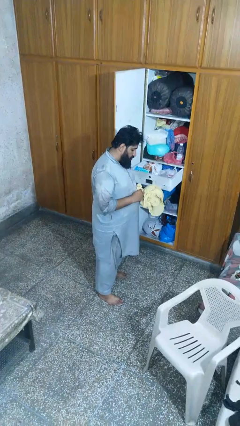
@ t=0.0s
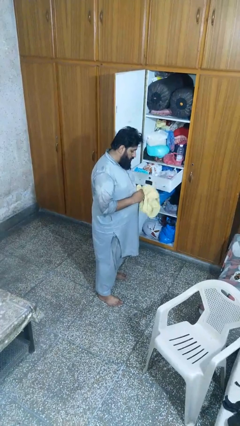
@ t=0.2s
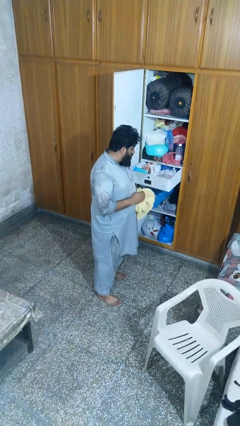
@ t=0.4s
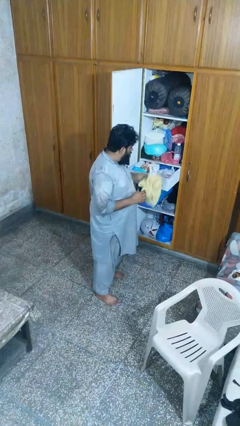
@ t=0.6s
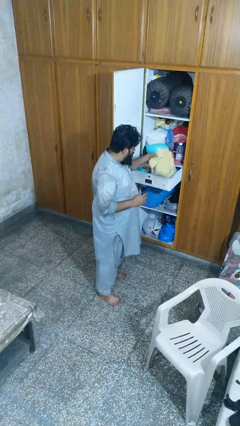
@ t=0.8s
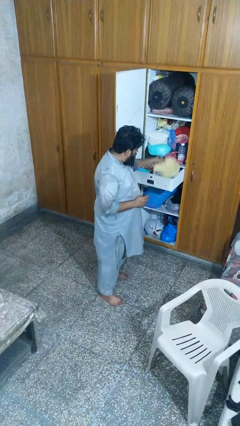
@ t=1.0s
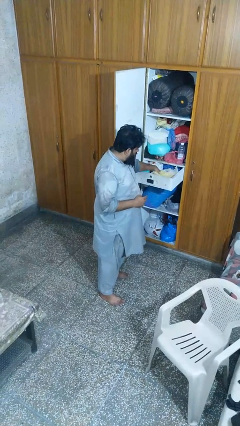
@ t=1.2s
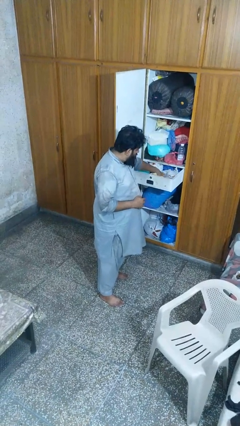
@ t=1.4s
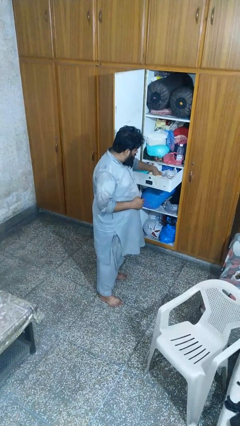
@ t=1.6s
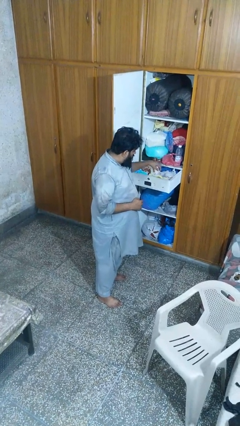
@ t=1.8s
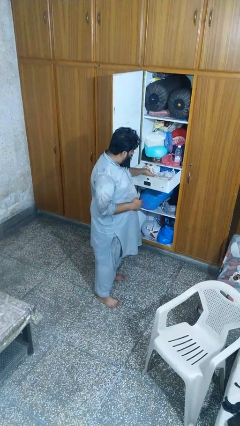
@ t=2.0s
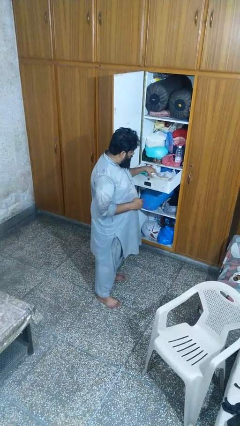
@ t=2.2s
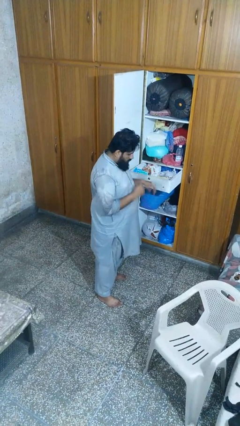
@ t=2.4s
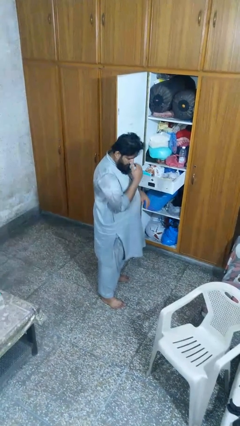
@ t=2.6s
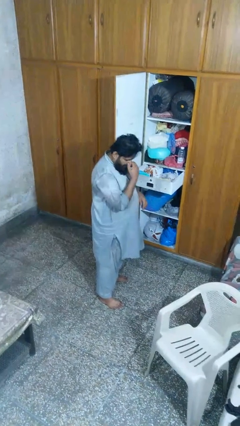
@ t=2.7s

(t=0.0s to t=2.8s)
person puts clothes into dresser

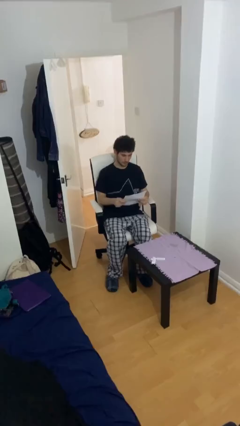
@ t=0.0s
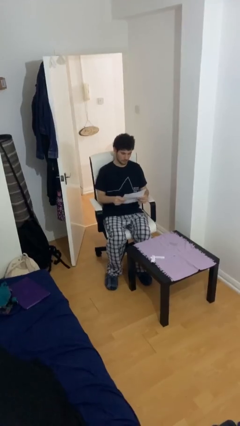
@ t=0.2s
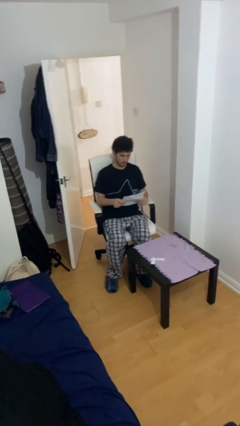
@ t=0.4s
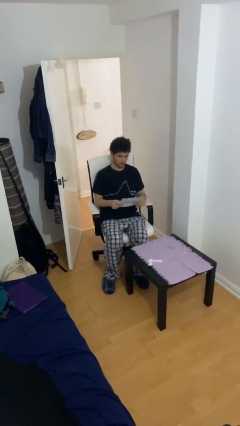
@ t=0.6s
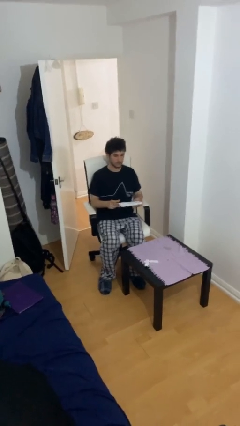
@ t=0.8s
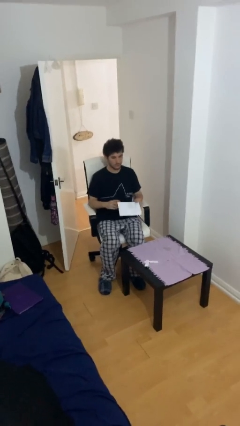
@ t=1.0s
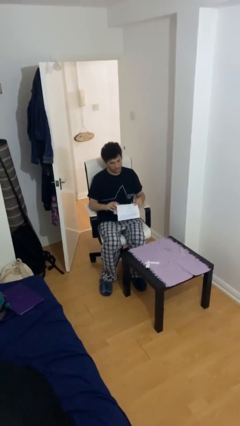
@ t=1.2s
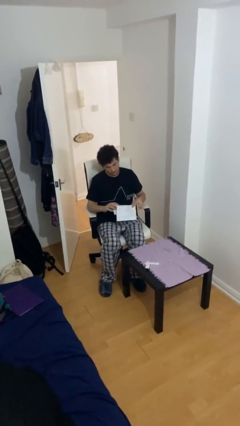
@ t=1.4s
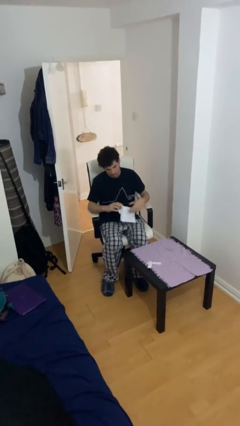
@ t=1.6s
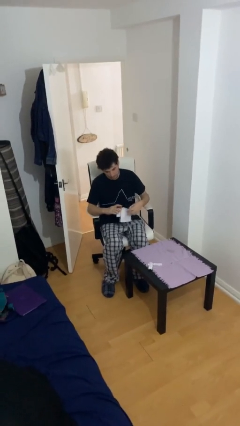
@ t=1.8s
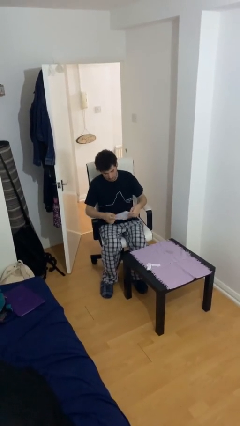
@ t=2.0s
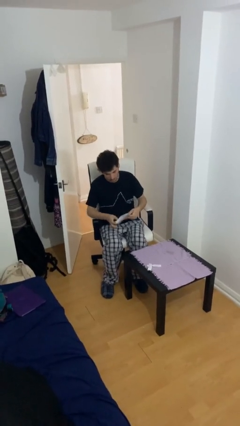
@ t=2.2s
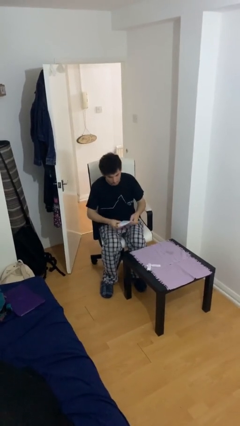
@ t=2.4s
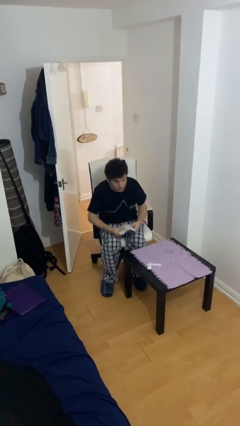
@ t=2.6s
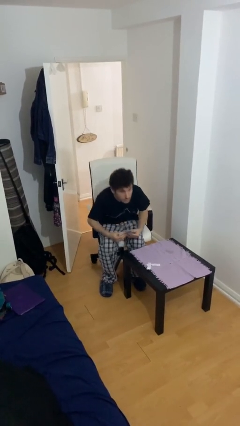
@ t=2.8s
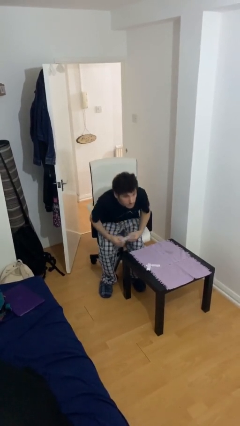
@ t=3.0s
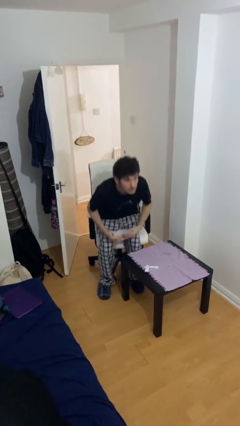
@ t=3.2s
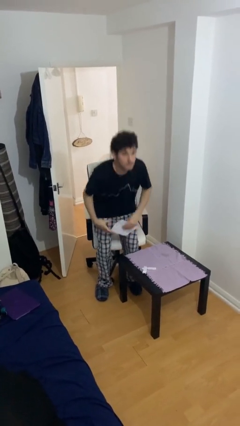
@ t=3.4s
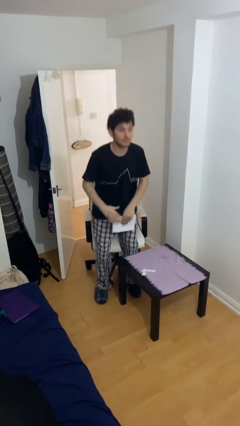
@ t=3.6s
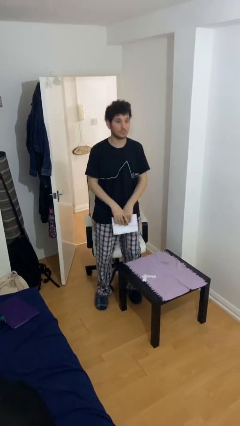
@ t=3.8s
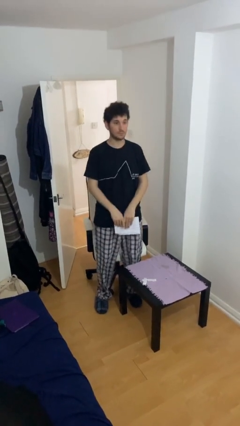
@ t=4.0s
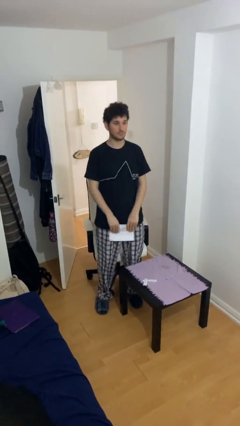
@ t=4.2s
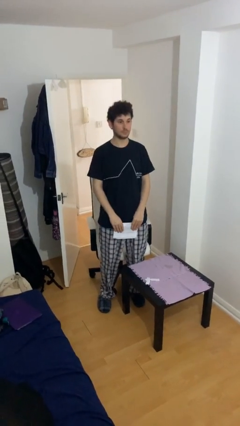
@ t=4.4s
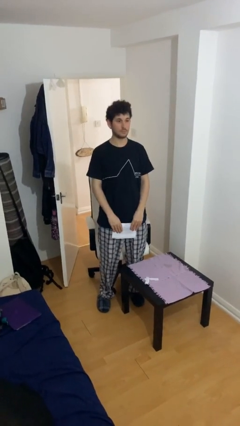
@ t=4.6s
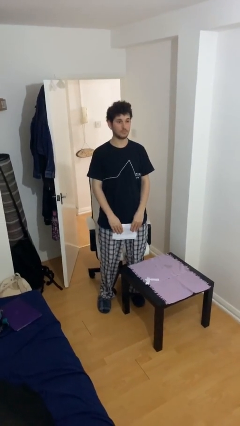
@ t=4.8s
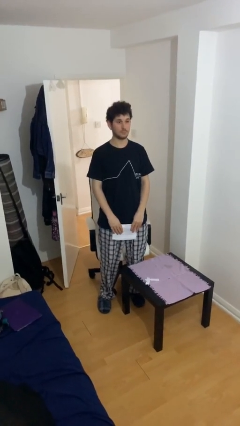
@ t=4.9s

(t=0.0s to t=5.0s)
person stands up

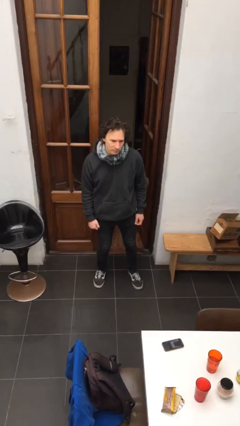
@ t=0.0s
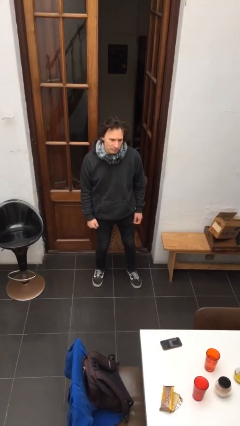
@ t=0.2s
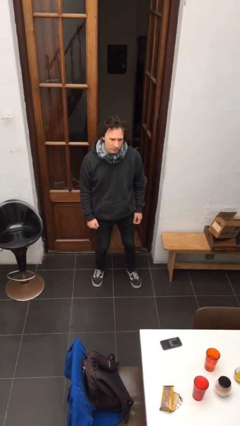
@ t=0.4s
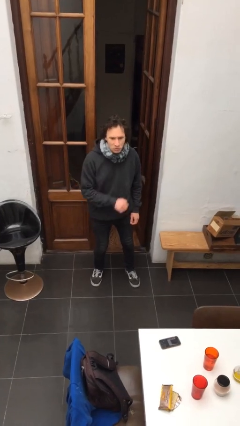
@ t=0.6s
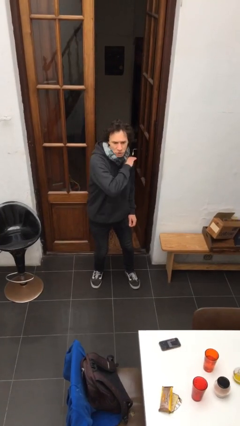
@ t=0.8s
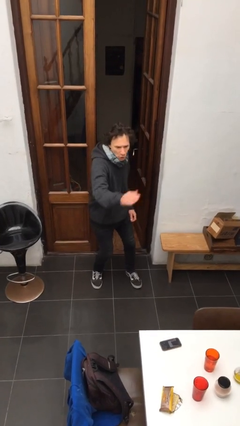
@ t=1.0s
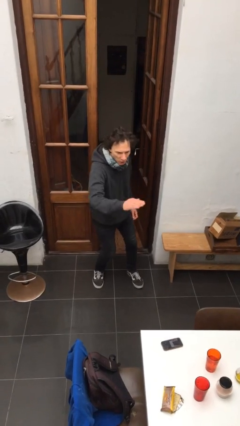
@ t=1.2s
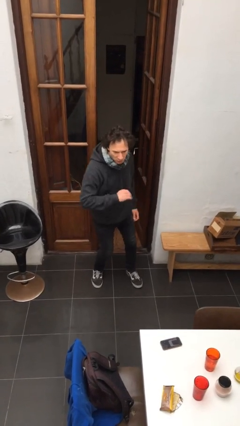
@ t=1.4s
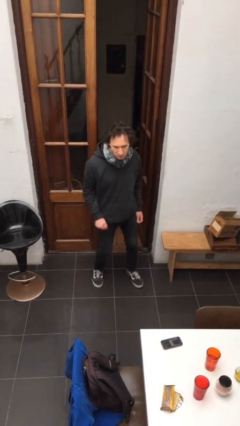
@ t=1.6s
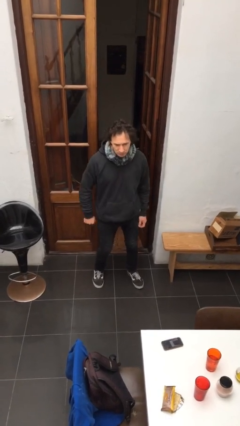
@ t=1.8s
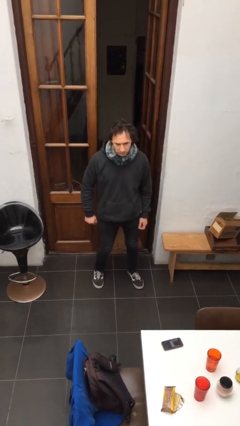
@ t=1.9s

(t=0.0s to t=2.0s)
person karate chop

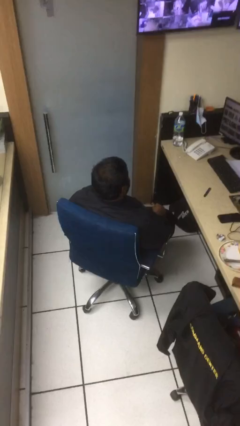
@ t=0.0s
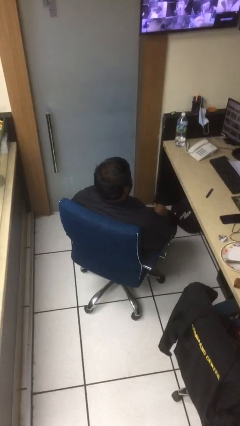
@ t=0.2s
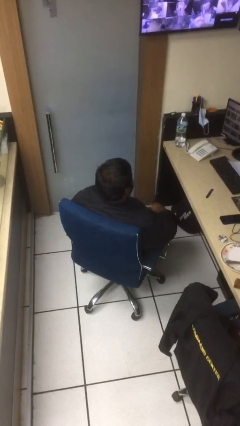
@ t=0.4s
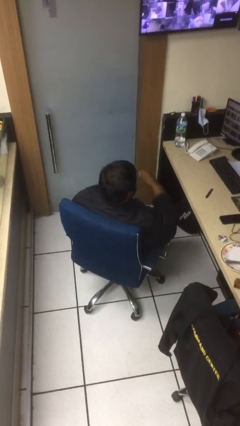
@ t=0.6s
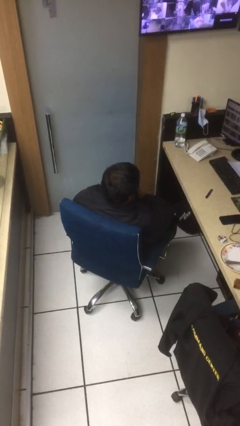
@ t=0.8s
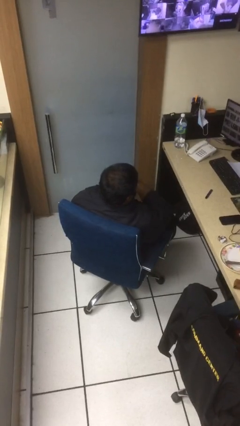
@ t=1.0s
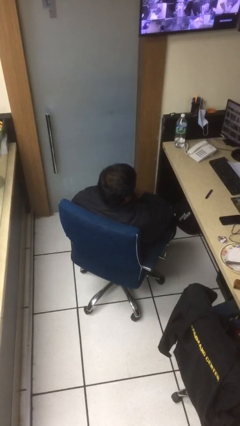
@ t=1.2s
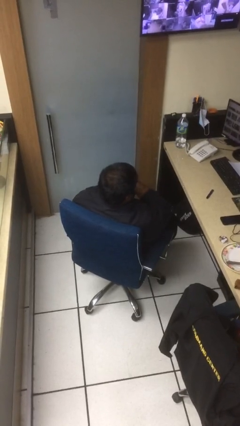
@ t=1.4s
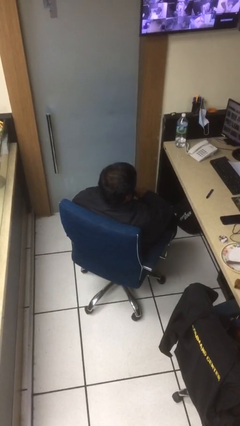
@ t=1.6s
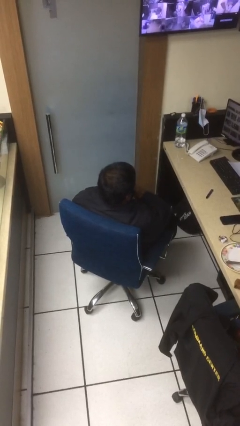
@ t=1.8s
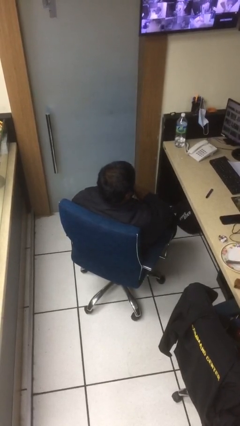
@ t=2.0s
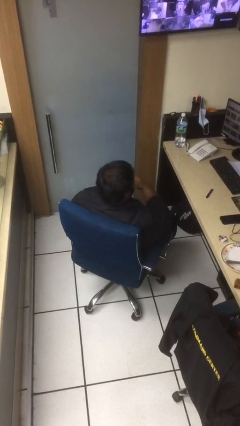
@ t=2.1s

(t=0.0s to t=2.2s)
person drums on chest

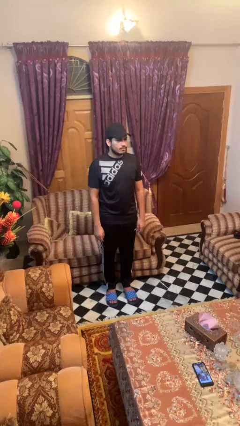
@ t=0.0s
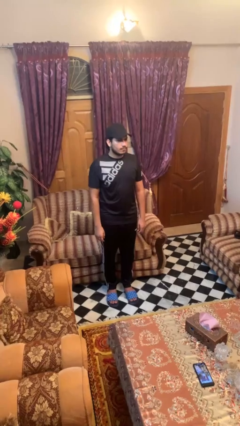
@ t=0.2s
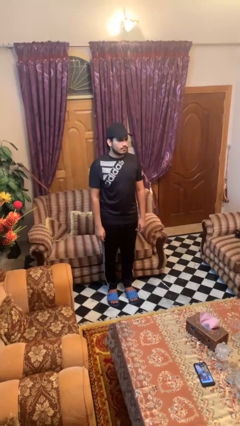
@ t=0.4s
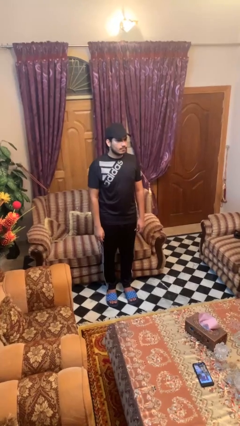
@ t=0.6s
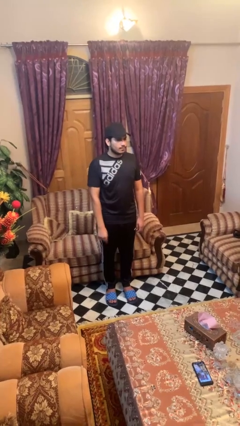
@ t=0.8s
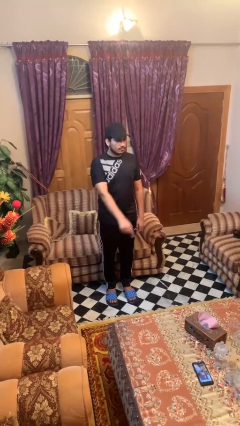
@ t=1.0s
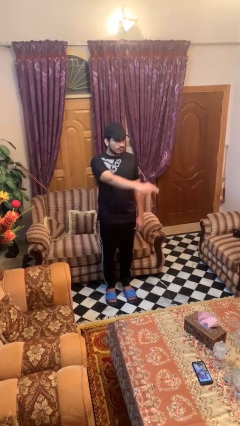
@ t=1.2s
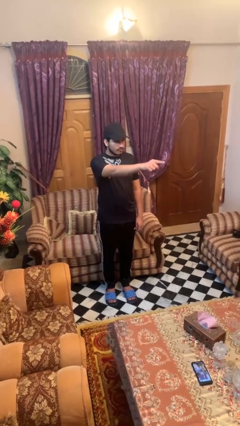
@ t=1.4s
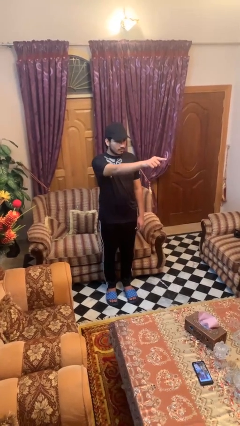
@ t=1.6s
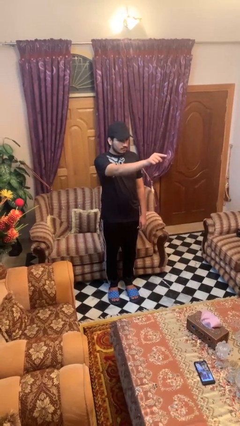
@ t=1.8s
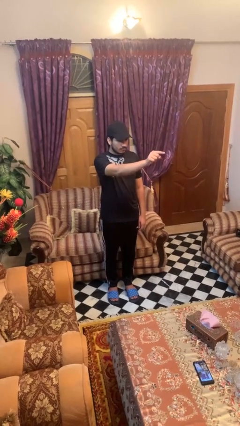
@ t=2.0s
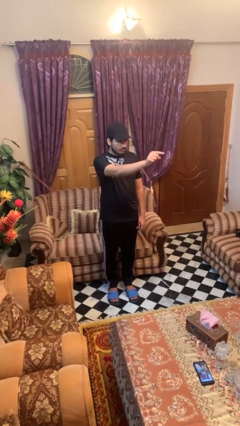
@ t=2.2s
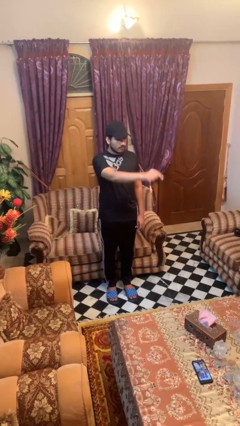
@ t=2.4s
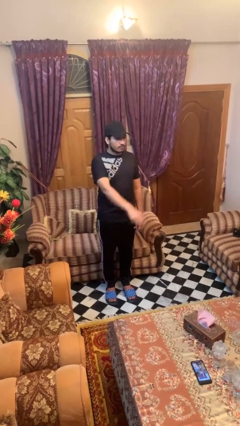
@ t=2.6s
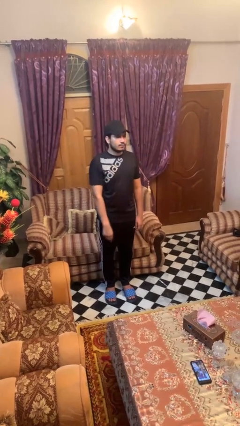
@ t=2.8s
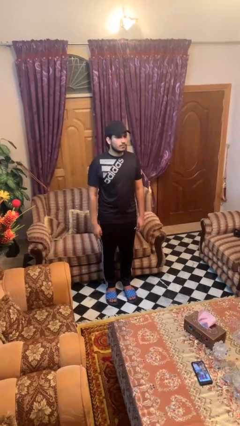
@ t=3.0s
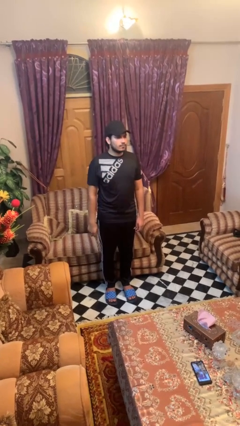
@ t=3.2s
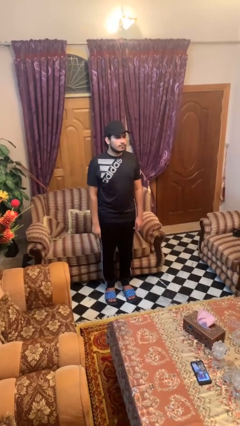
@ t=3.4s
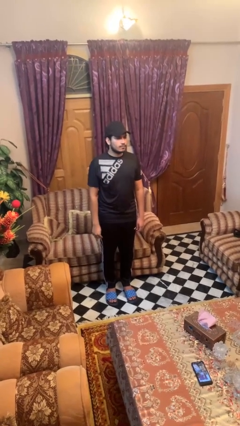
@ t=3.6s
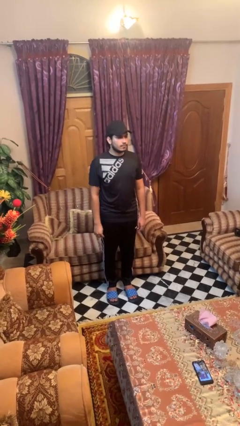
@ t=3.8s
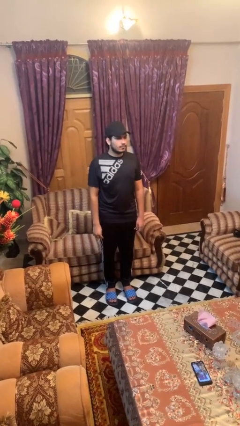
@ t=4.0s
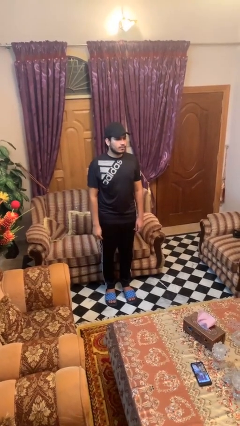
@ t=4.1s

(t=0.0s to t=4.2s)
person points at person

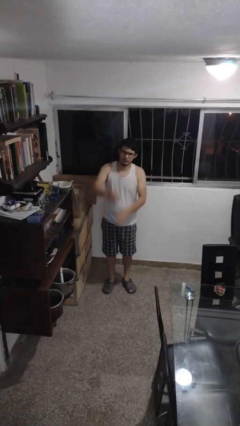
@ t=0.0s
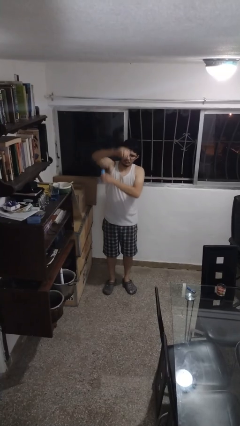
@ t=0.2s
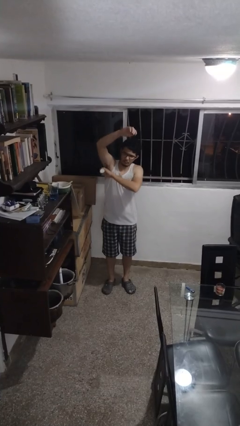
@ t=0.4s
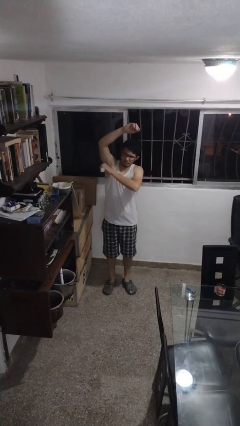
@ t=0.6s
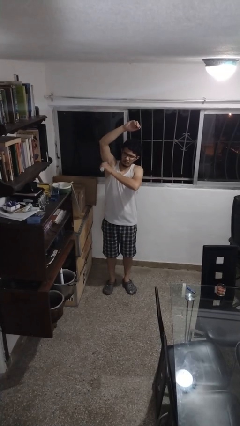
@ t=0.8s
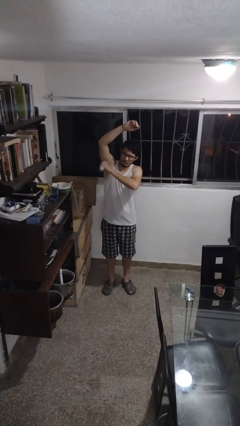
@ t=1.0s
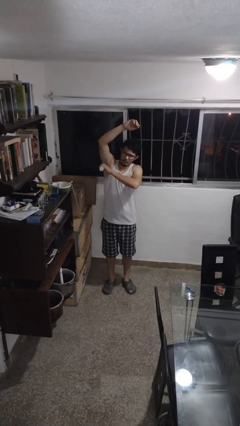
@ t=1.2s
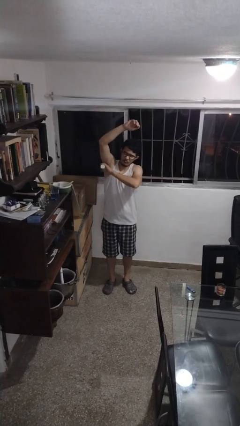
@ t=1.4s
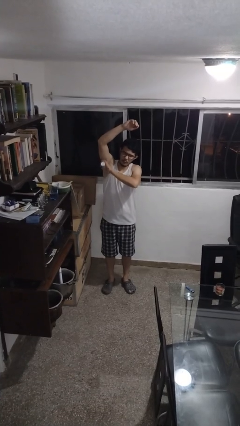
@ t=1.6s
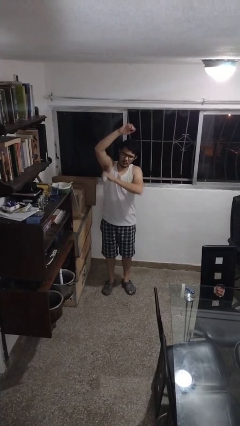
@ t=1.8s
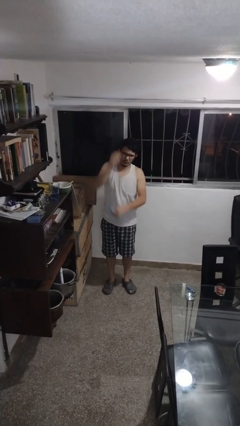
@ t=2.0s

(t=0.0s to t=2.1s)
person applies deodorant
